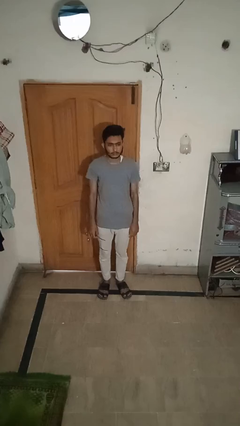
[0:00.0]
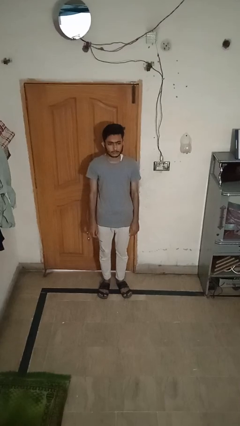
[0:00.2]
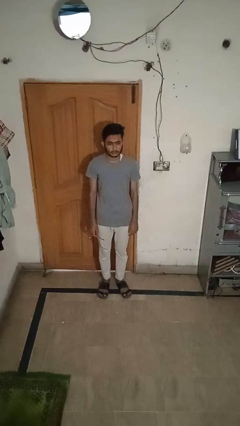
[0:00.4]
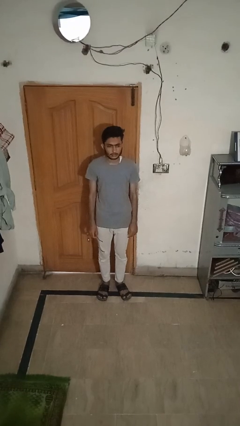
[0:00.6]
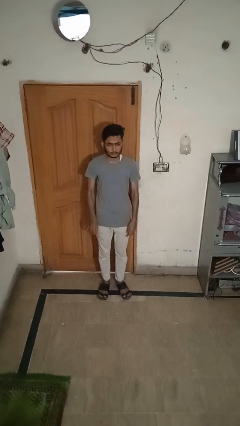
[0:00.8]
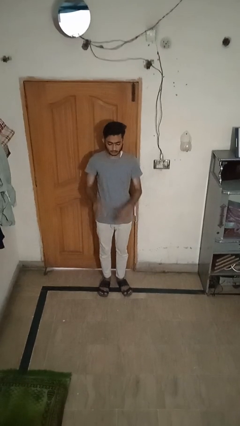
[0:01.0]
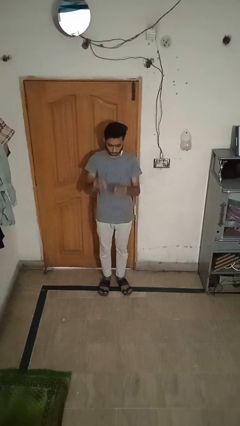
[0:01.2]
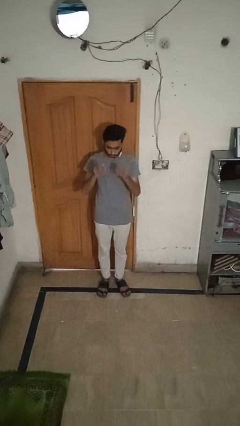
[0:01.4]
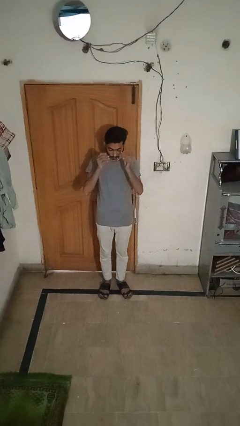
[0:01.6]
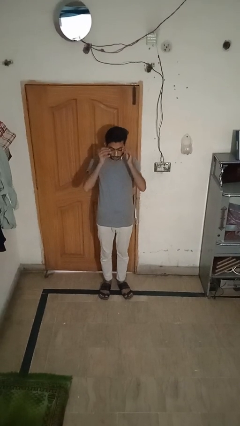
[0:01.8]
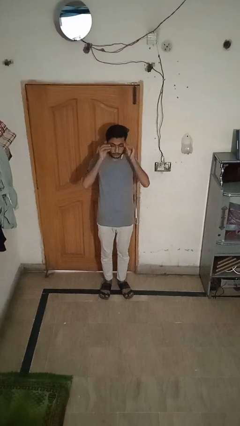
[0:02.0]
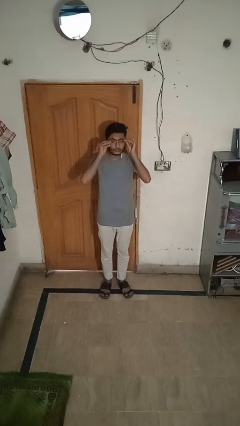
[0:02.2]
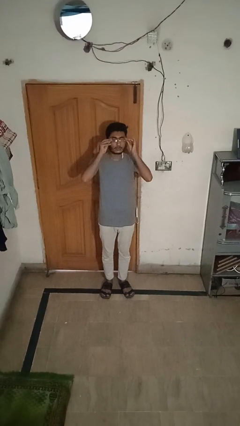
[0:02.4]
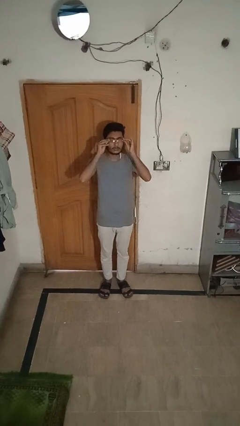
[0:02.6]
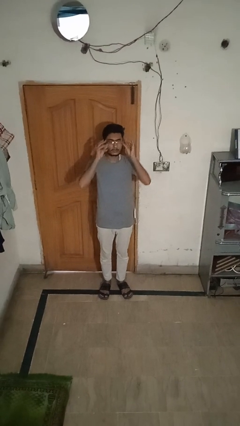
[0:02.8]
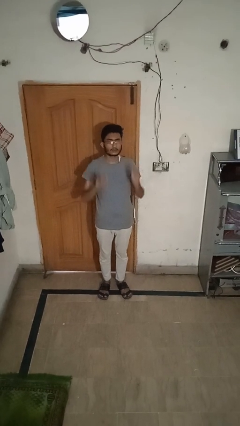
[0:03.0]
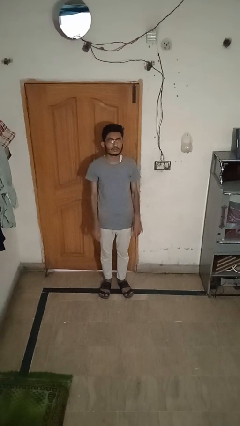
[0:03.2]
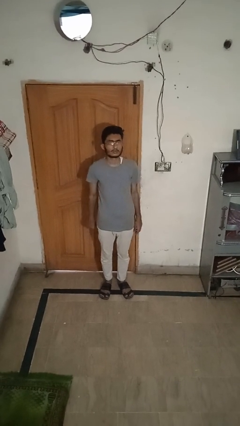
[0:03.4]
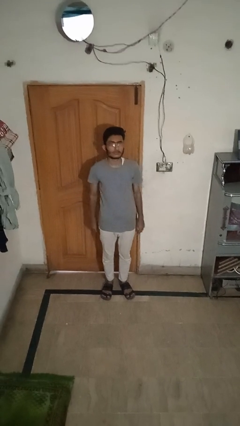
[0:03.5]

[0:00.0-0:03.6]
person puts on glasses

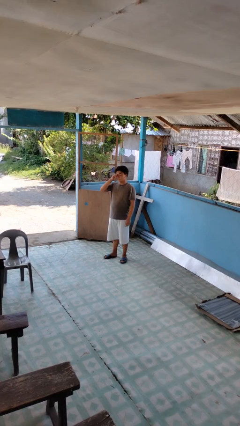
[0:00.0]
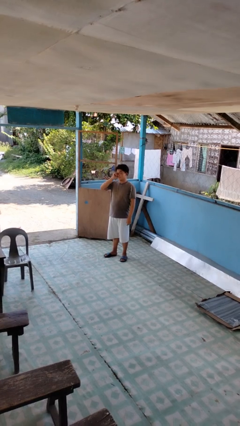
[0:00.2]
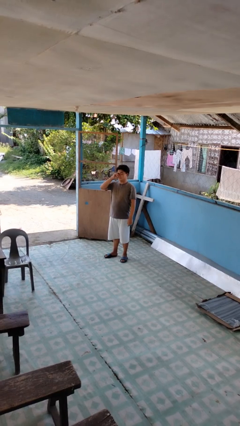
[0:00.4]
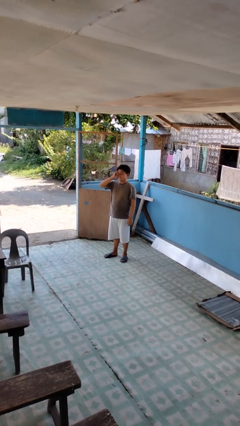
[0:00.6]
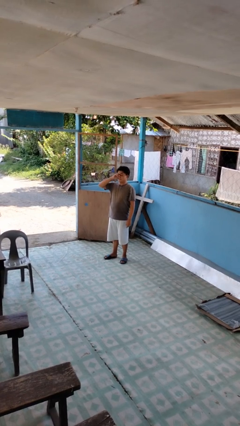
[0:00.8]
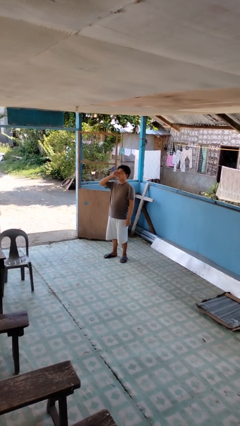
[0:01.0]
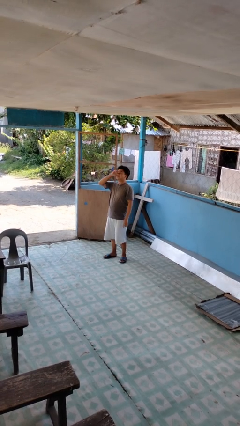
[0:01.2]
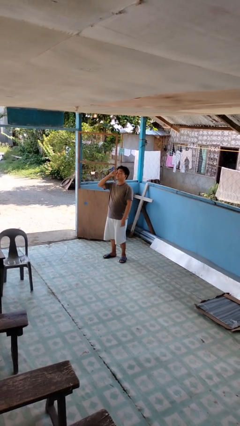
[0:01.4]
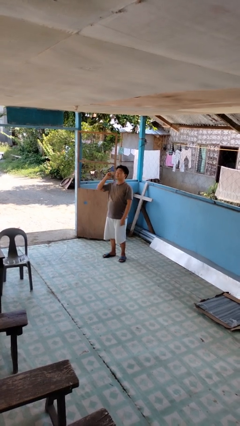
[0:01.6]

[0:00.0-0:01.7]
person rubs eyes

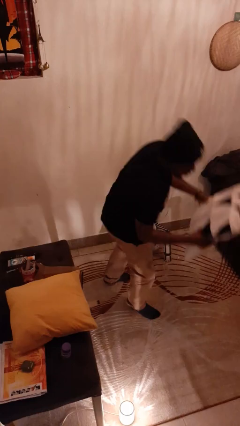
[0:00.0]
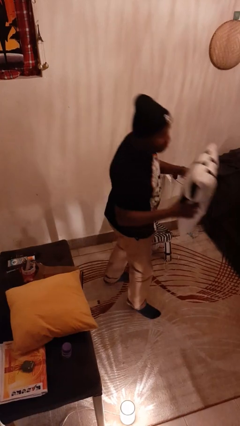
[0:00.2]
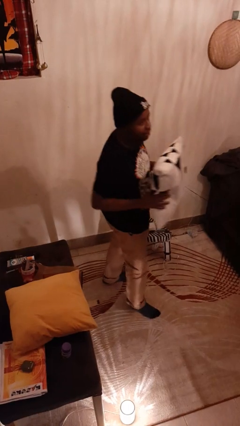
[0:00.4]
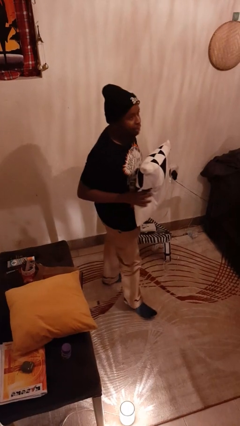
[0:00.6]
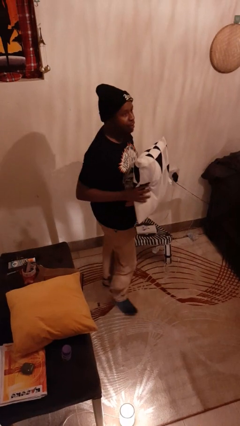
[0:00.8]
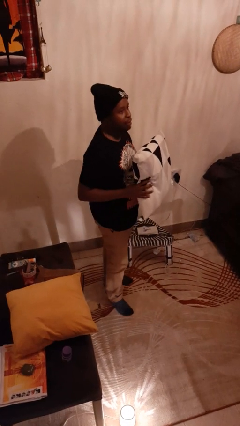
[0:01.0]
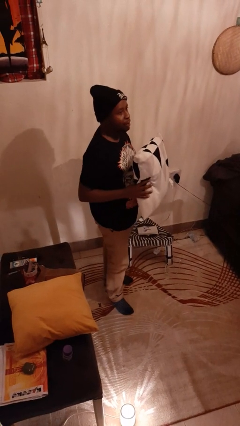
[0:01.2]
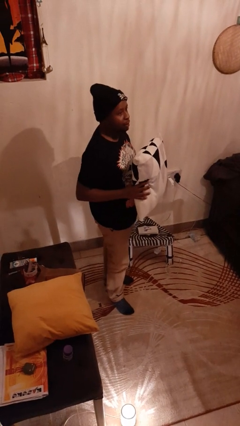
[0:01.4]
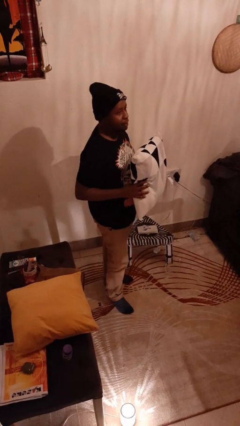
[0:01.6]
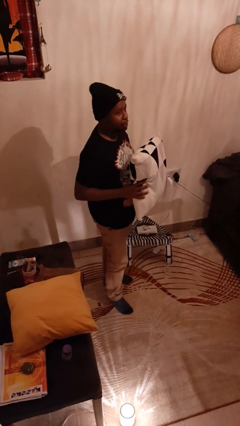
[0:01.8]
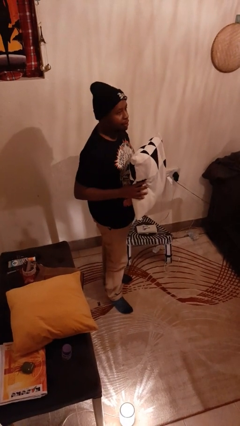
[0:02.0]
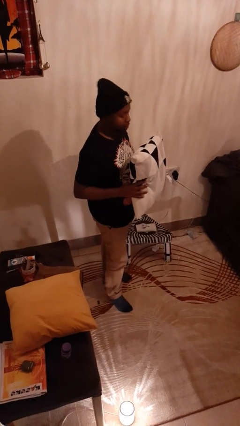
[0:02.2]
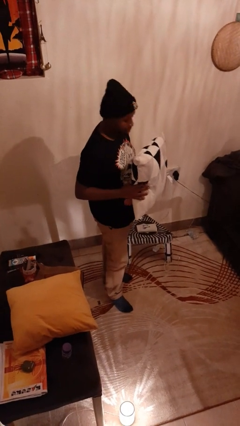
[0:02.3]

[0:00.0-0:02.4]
person picks up object from floor

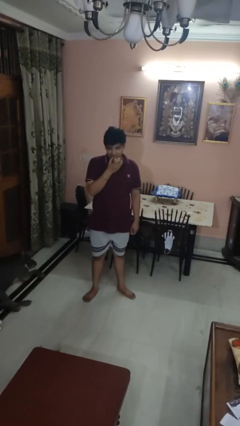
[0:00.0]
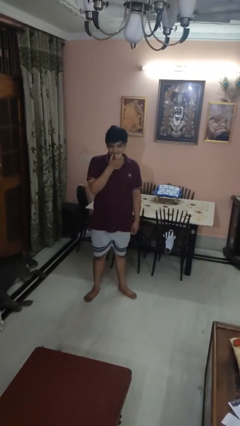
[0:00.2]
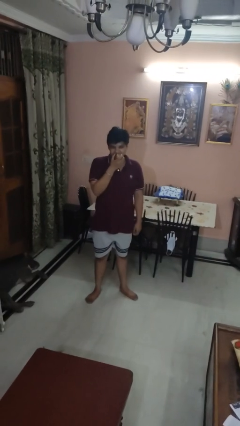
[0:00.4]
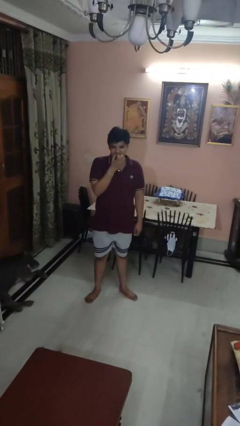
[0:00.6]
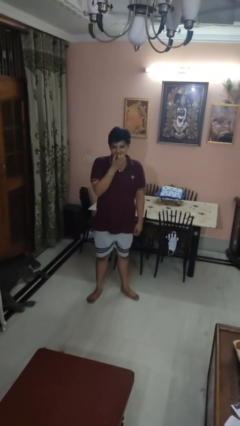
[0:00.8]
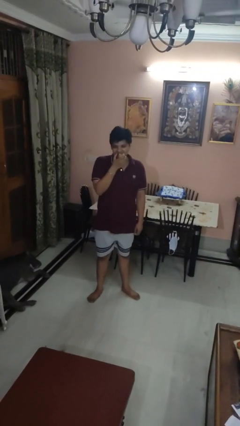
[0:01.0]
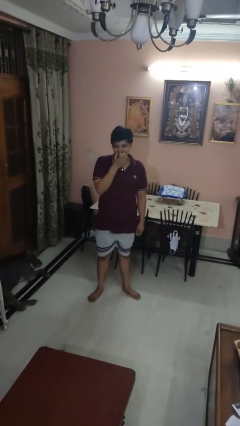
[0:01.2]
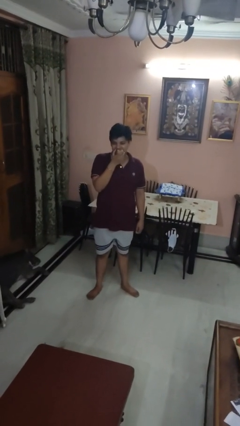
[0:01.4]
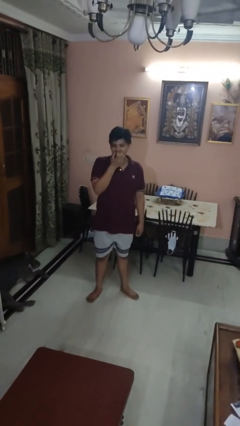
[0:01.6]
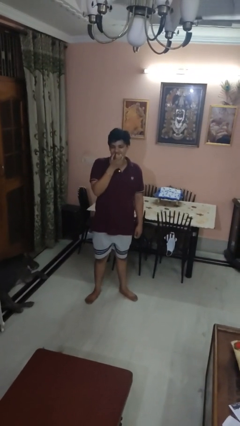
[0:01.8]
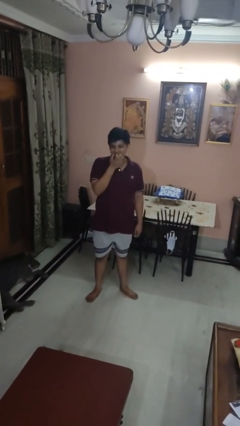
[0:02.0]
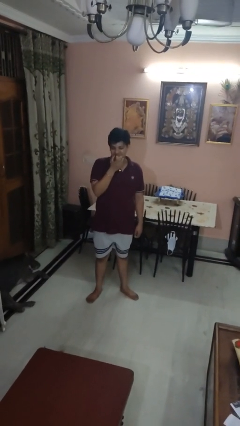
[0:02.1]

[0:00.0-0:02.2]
person eats apple

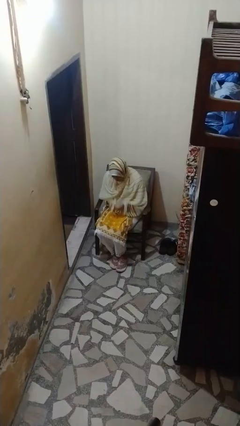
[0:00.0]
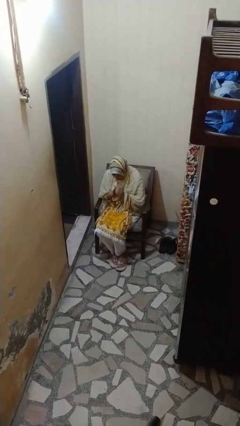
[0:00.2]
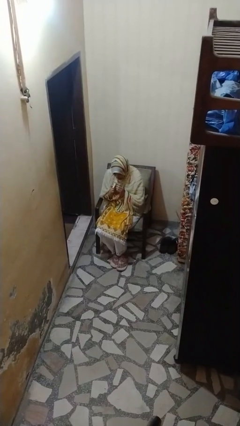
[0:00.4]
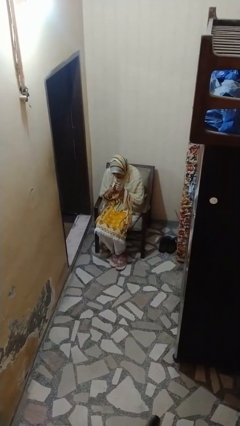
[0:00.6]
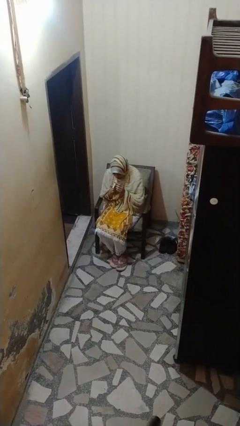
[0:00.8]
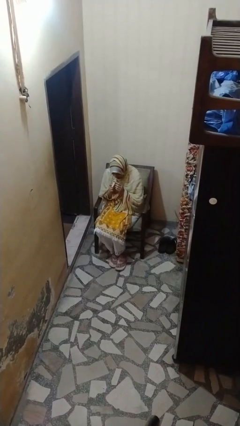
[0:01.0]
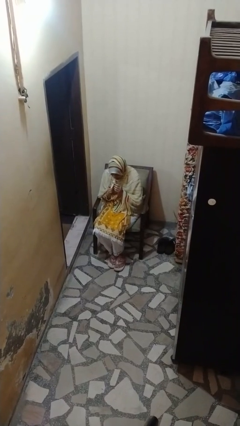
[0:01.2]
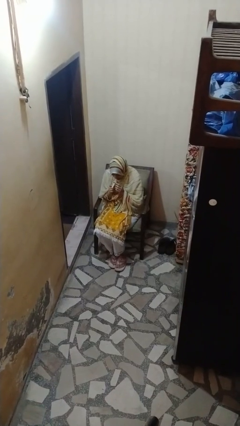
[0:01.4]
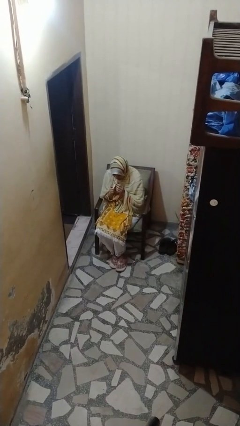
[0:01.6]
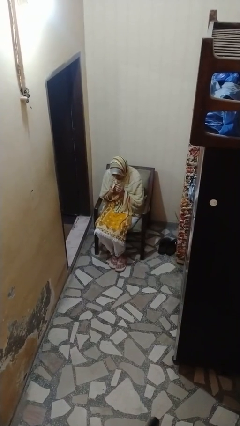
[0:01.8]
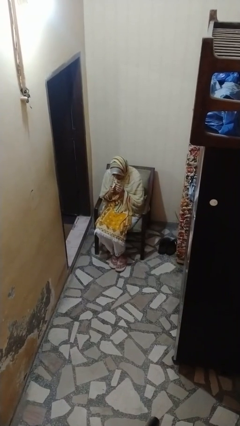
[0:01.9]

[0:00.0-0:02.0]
person eats banana

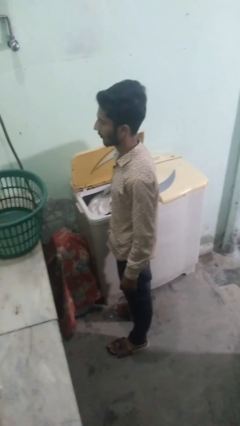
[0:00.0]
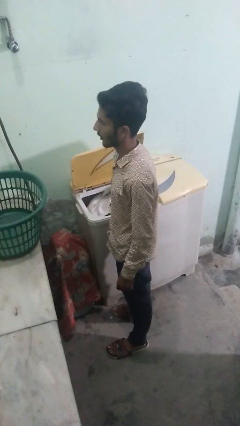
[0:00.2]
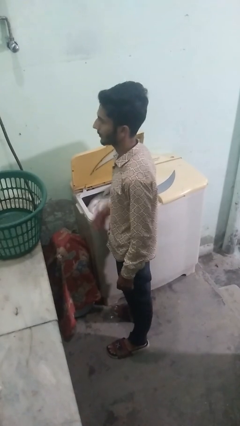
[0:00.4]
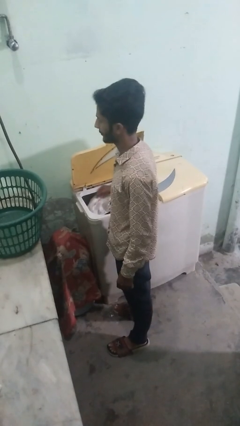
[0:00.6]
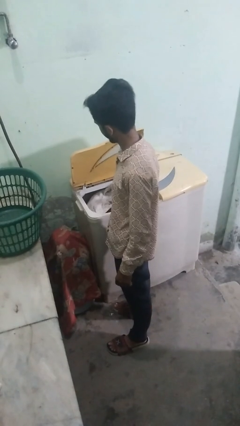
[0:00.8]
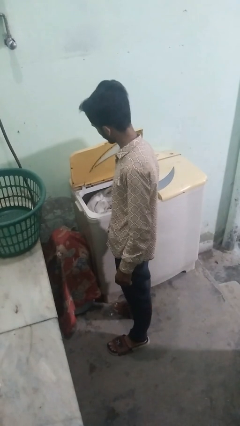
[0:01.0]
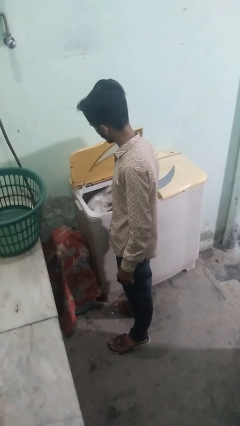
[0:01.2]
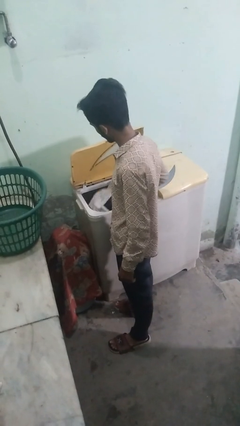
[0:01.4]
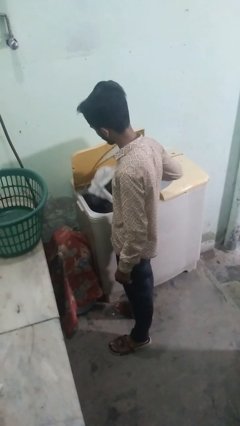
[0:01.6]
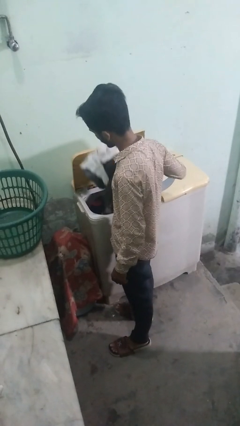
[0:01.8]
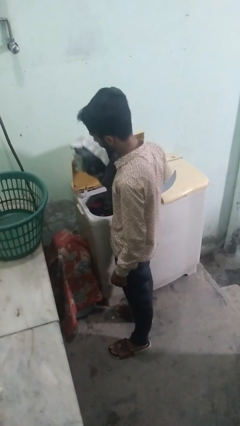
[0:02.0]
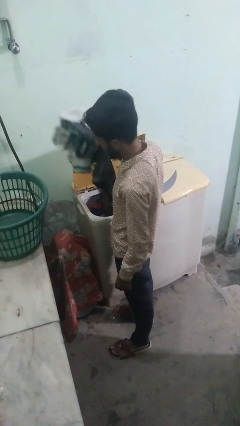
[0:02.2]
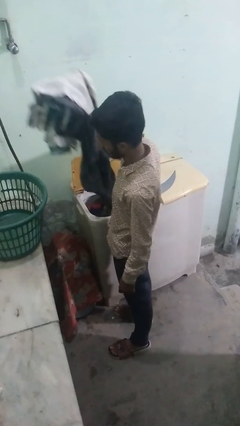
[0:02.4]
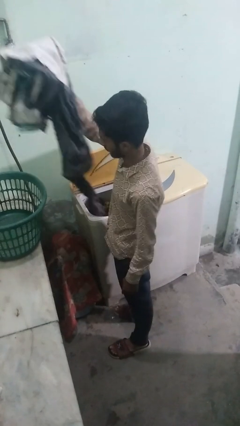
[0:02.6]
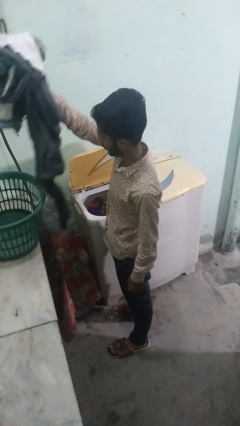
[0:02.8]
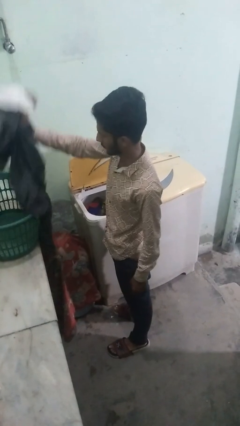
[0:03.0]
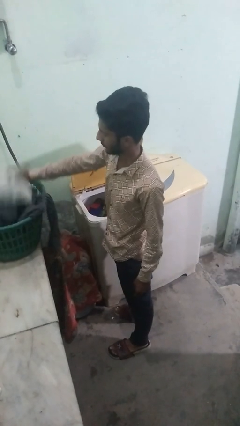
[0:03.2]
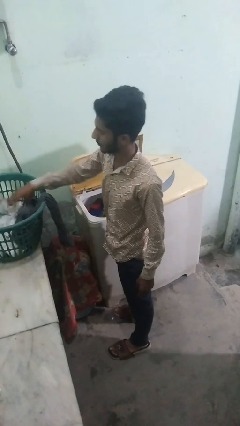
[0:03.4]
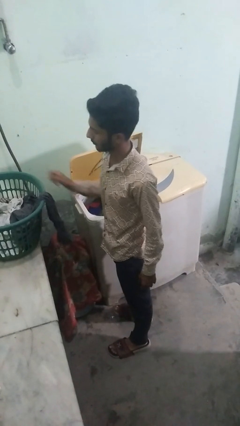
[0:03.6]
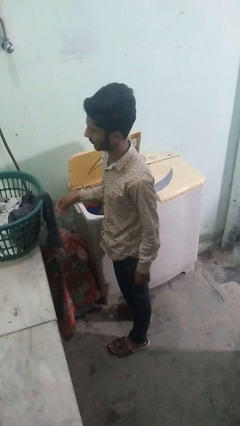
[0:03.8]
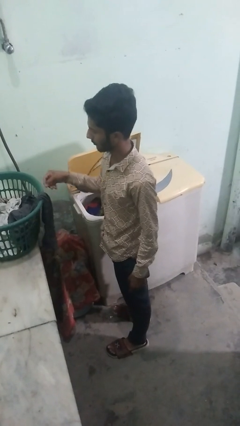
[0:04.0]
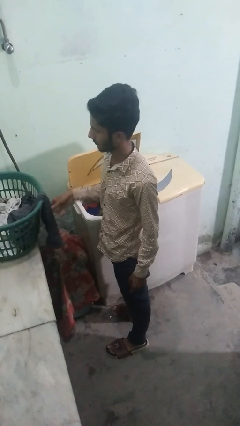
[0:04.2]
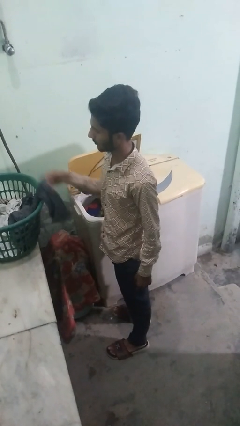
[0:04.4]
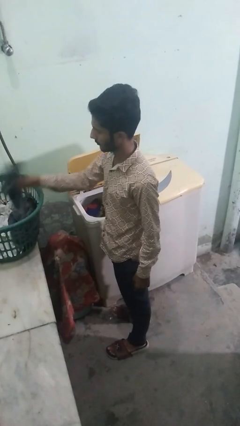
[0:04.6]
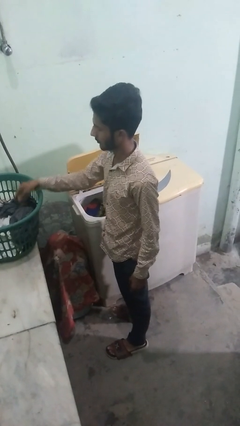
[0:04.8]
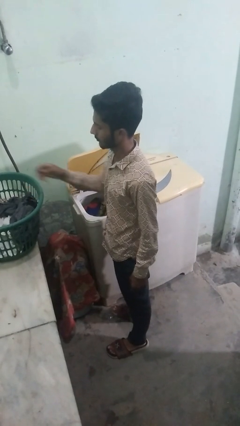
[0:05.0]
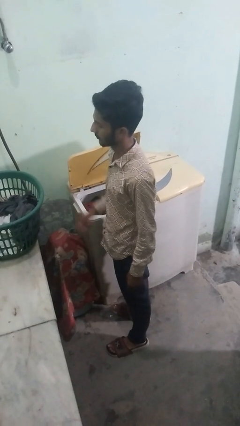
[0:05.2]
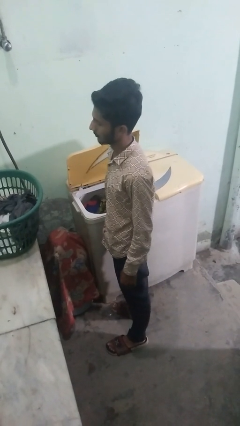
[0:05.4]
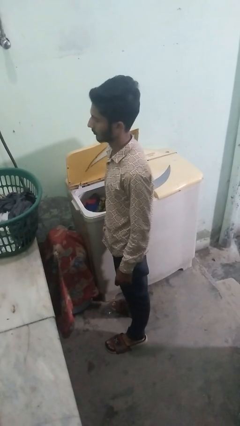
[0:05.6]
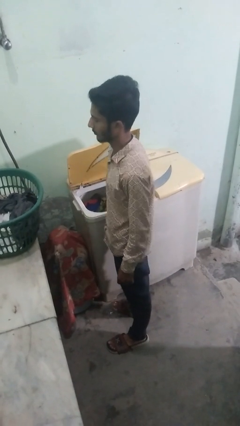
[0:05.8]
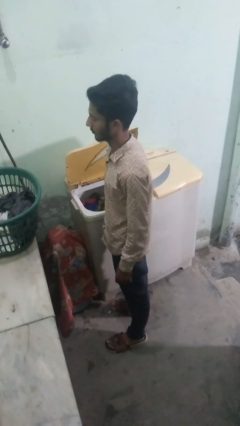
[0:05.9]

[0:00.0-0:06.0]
person unloads clotheswasher
